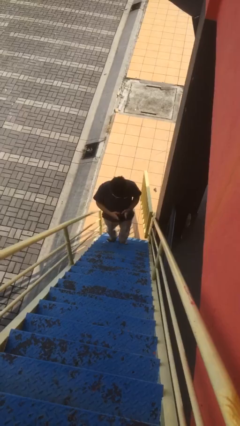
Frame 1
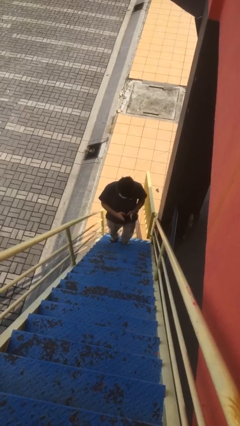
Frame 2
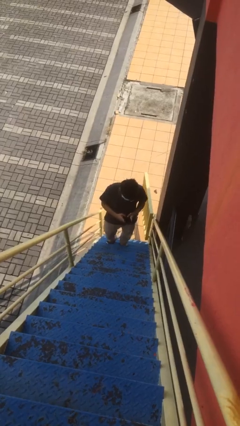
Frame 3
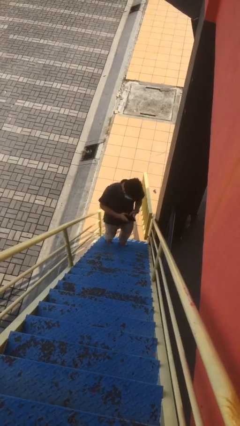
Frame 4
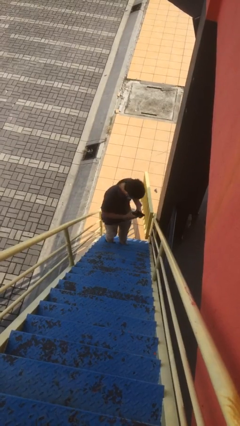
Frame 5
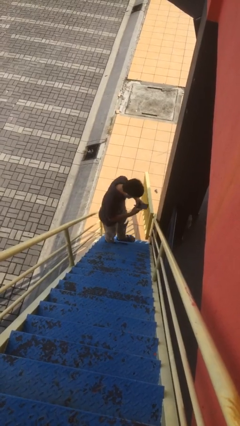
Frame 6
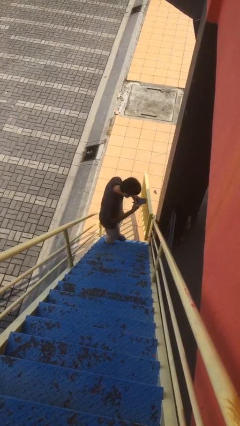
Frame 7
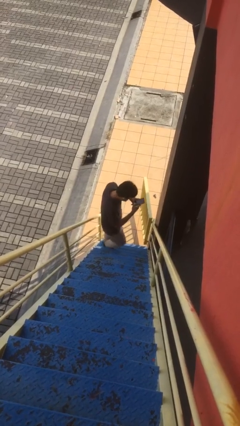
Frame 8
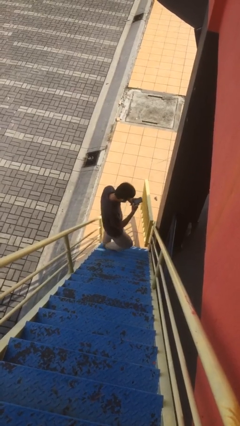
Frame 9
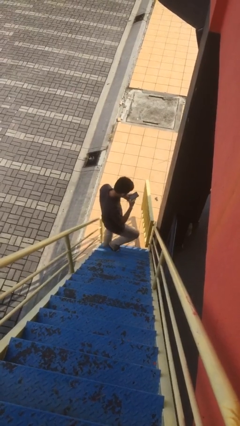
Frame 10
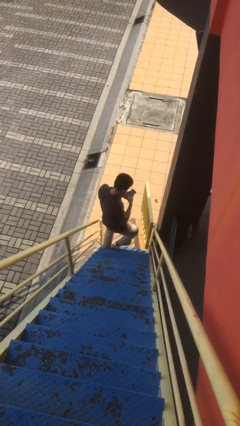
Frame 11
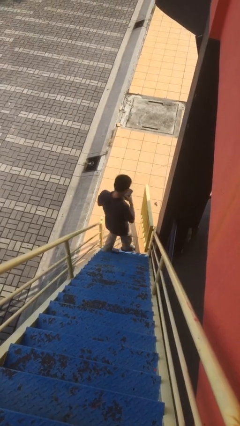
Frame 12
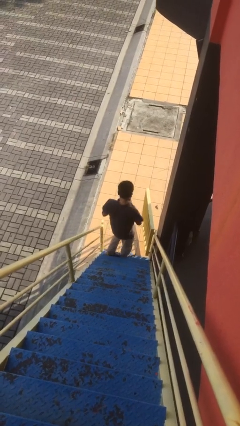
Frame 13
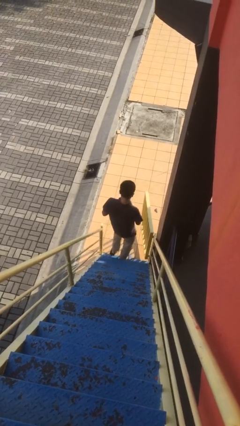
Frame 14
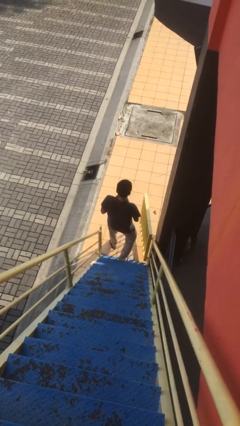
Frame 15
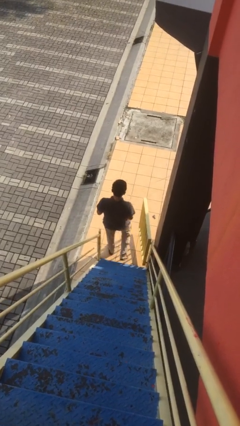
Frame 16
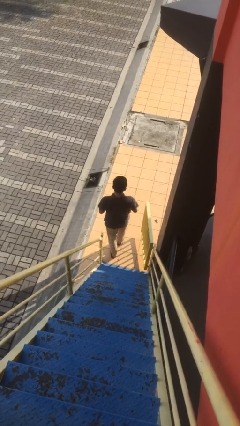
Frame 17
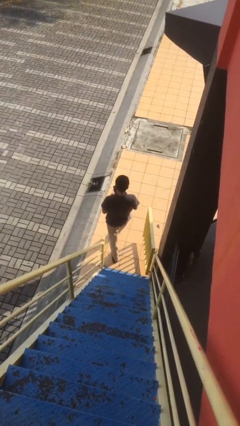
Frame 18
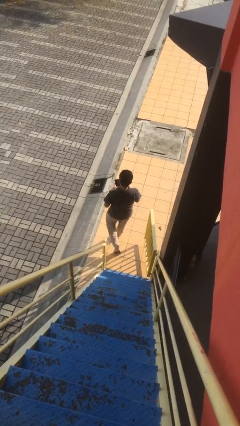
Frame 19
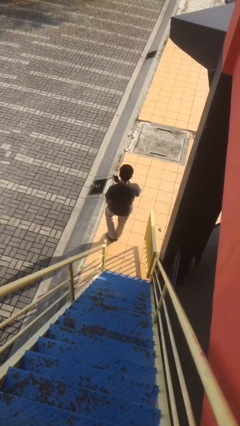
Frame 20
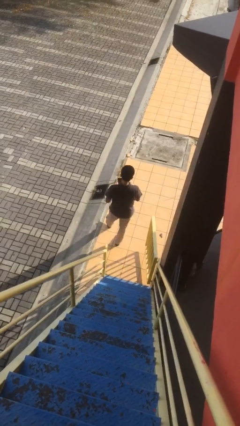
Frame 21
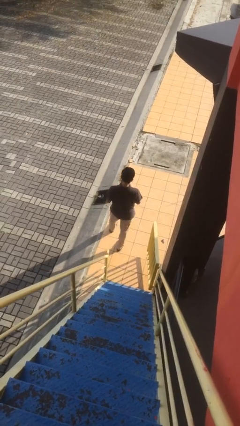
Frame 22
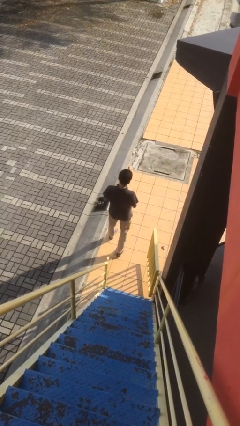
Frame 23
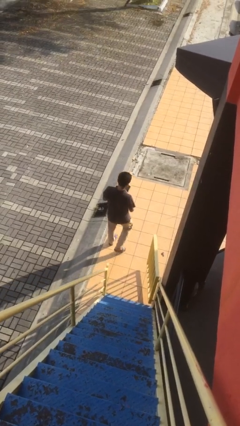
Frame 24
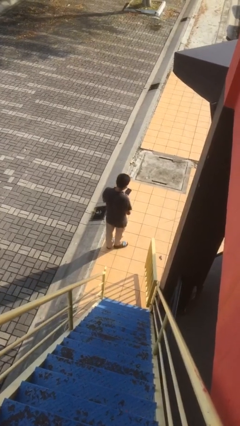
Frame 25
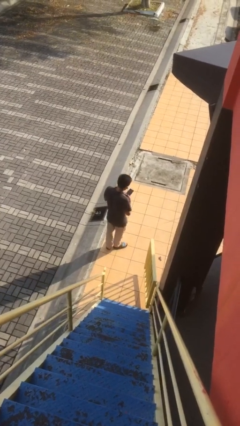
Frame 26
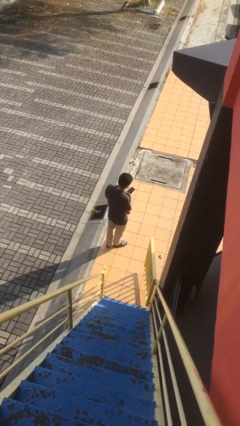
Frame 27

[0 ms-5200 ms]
person exits scene through structure

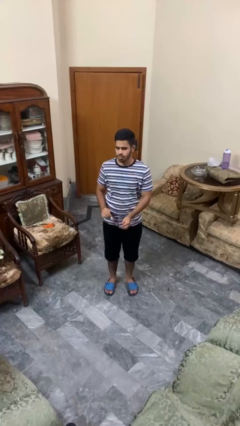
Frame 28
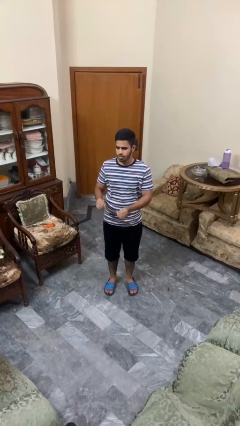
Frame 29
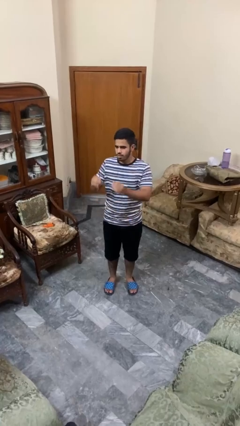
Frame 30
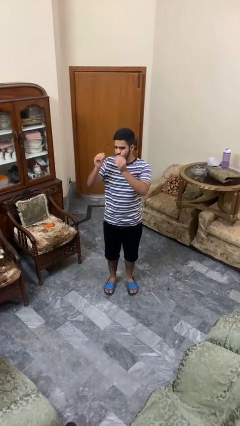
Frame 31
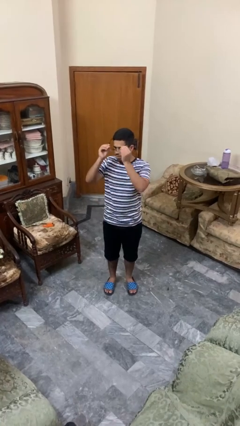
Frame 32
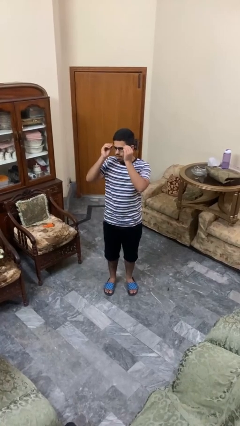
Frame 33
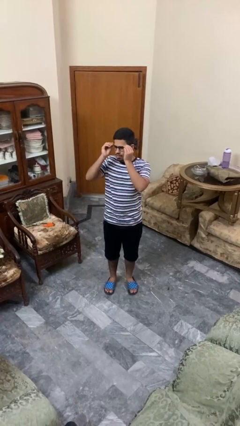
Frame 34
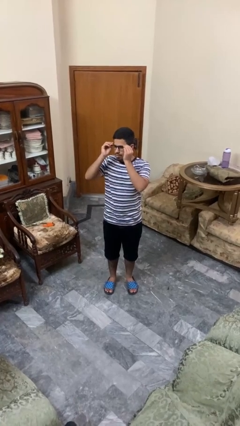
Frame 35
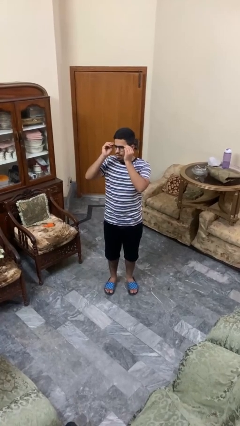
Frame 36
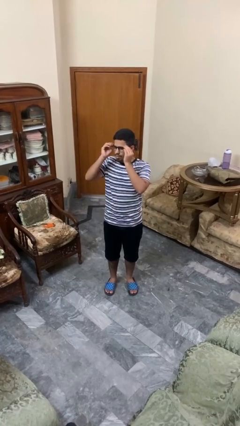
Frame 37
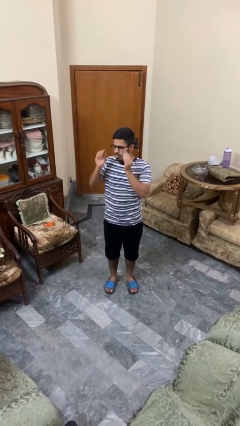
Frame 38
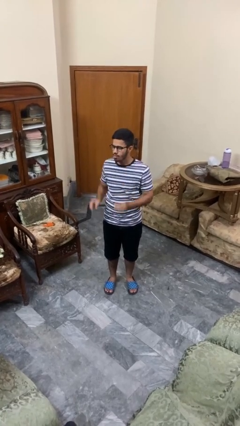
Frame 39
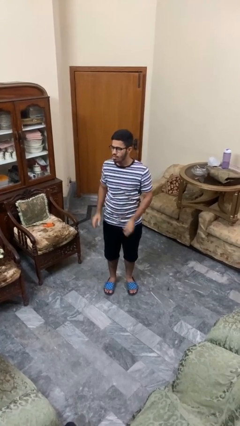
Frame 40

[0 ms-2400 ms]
person puts on glasses

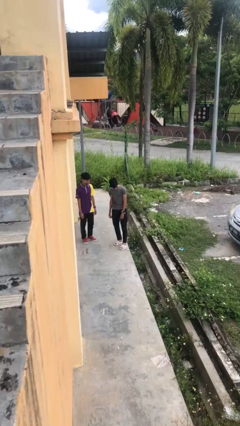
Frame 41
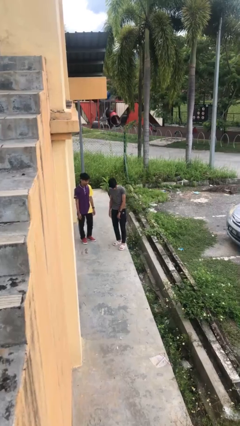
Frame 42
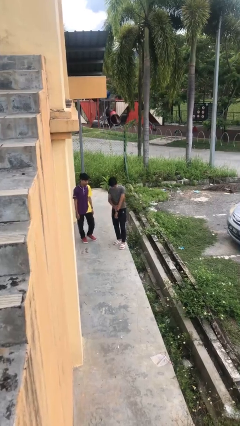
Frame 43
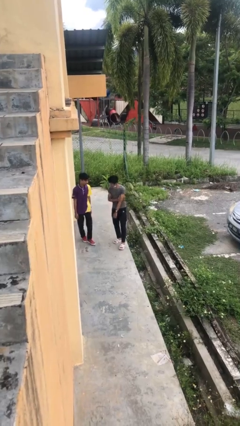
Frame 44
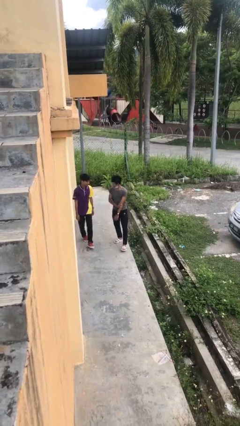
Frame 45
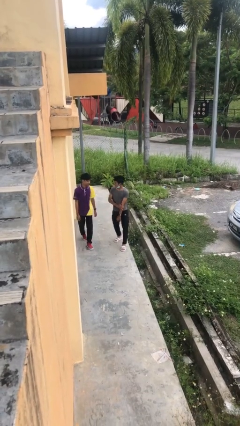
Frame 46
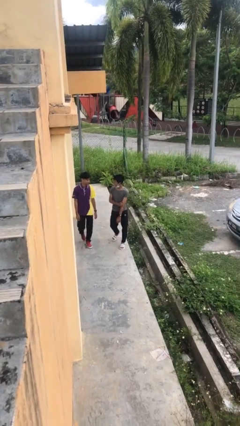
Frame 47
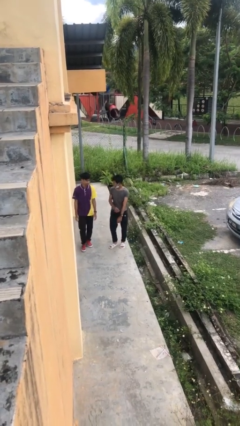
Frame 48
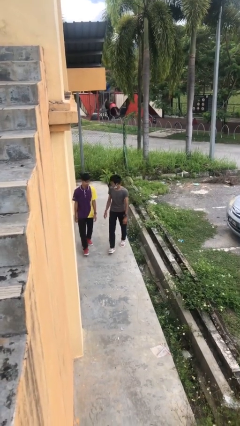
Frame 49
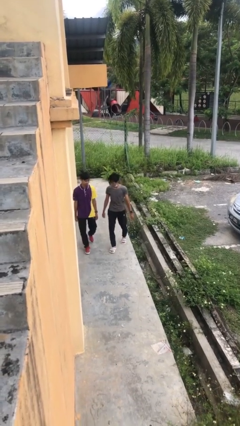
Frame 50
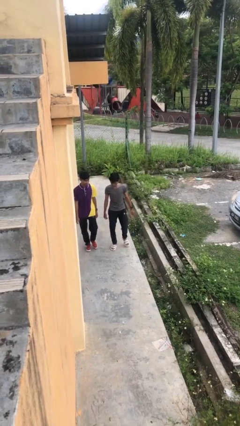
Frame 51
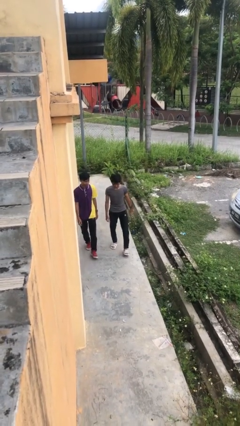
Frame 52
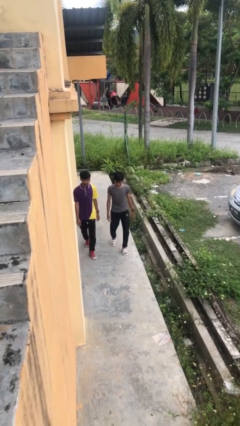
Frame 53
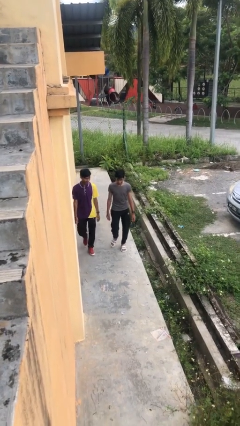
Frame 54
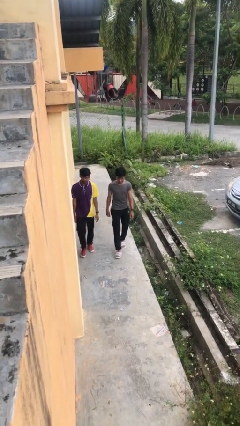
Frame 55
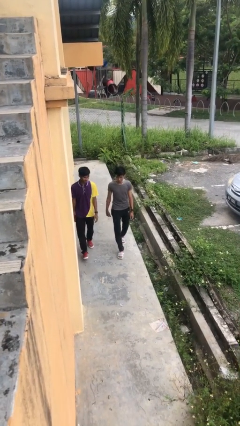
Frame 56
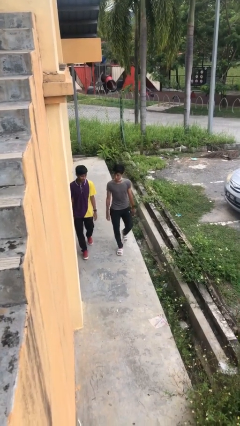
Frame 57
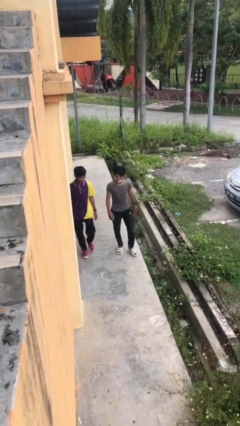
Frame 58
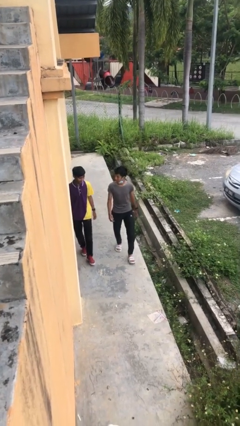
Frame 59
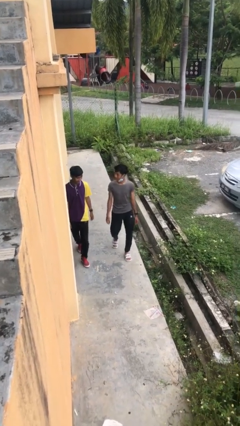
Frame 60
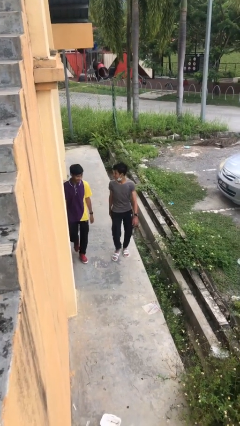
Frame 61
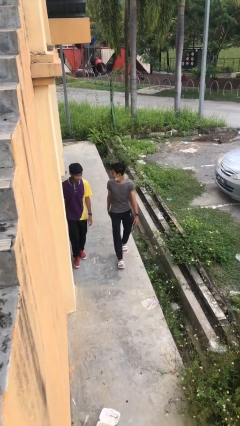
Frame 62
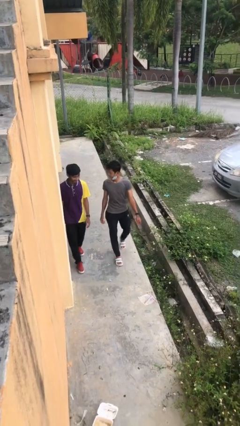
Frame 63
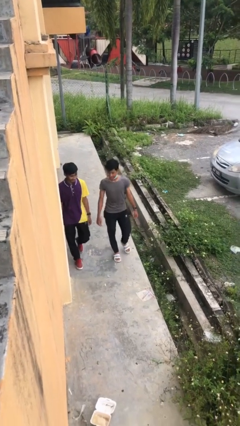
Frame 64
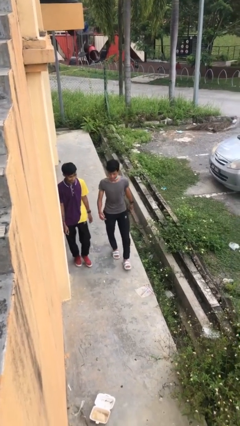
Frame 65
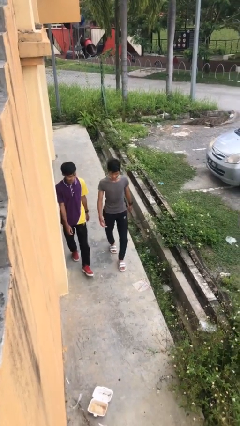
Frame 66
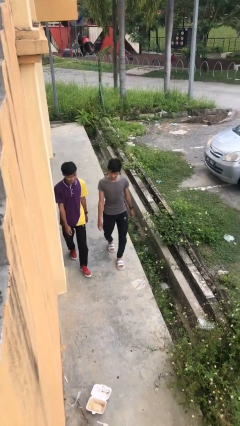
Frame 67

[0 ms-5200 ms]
person talks to person

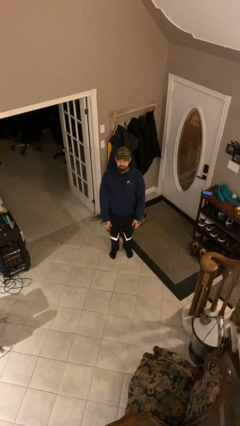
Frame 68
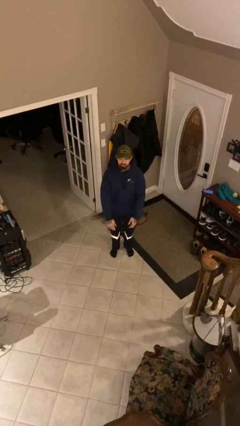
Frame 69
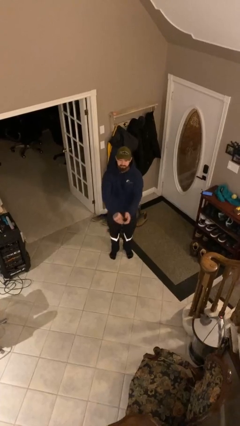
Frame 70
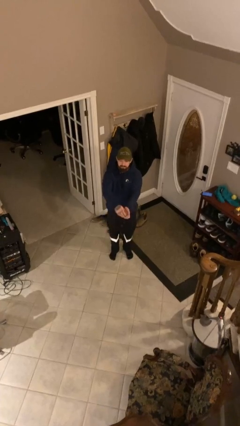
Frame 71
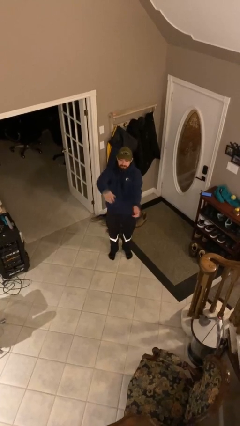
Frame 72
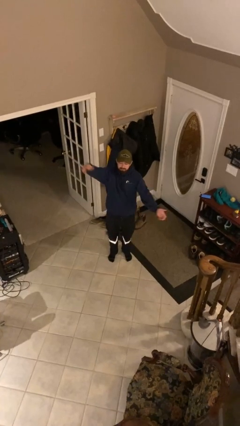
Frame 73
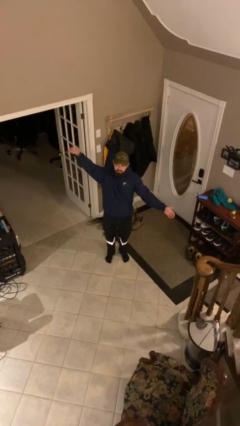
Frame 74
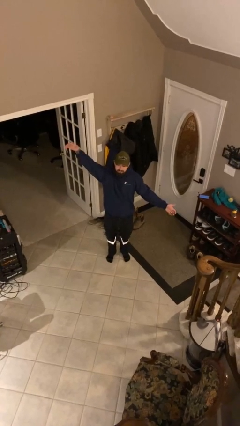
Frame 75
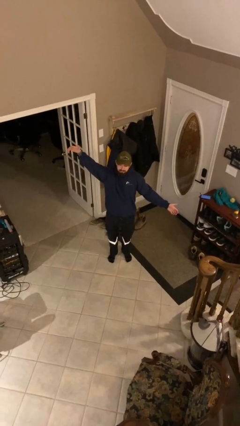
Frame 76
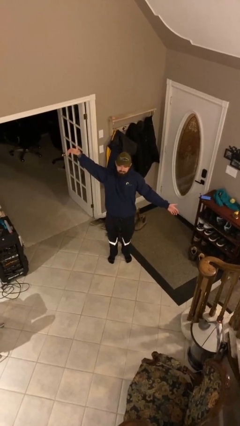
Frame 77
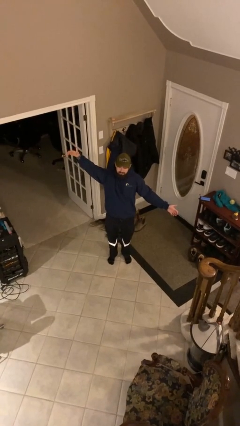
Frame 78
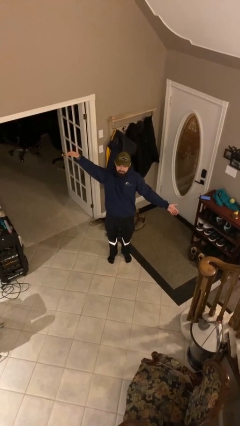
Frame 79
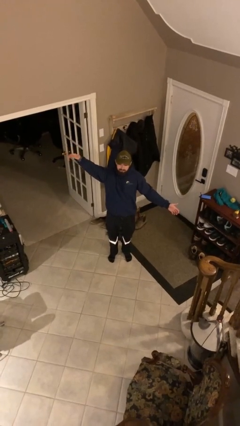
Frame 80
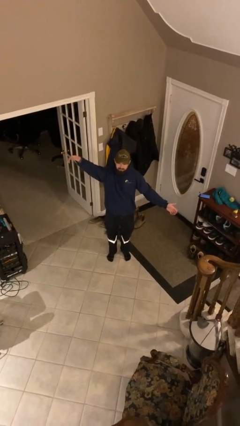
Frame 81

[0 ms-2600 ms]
person gestures zoom in

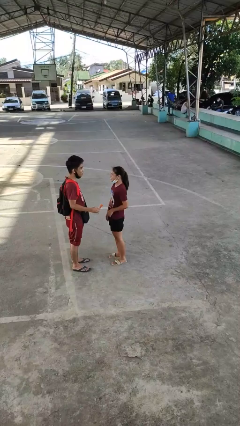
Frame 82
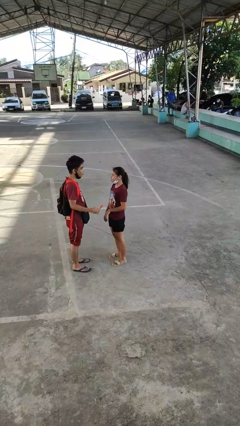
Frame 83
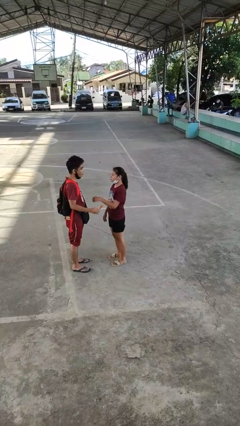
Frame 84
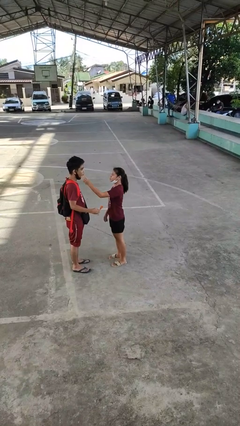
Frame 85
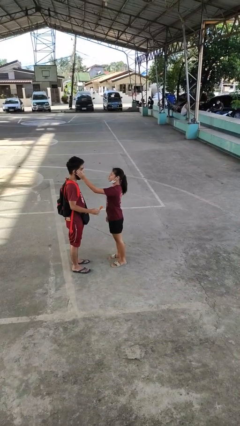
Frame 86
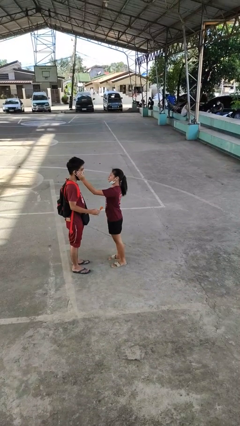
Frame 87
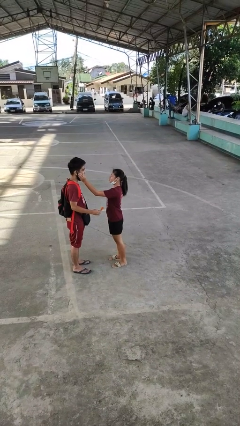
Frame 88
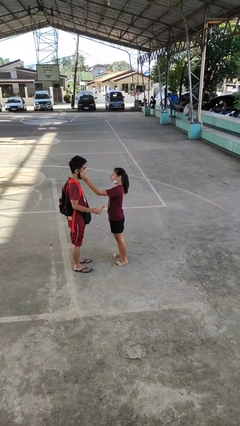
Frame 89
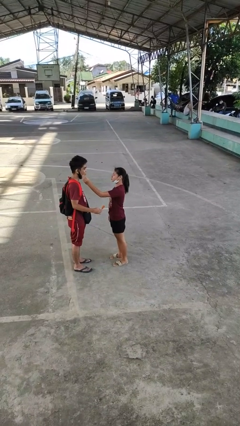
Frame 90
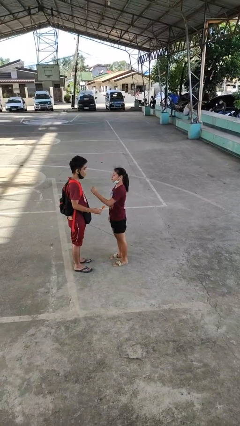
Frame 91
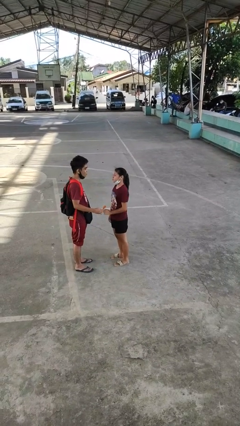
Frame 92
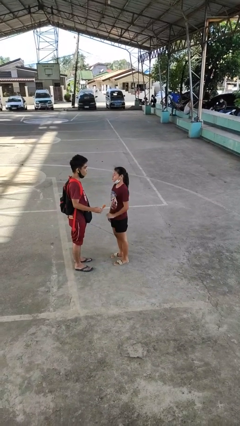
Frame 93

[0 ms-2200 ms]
person touches face of person
